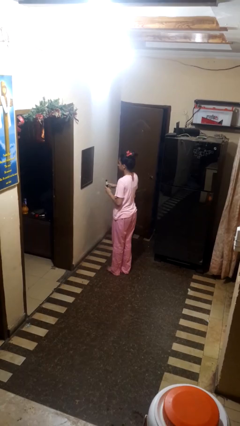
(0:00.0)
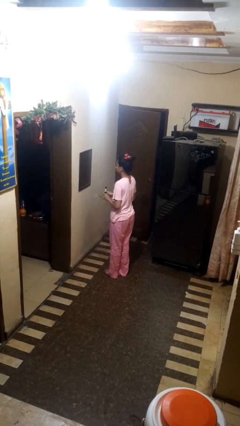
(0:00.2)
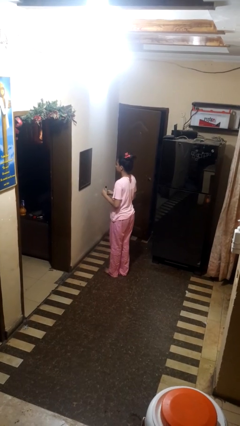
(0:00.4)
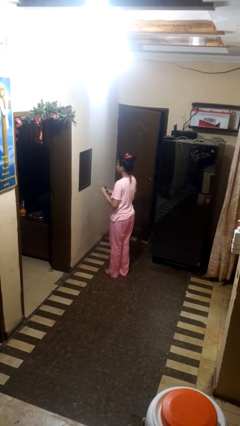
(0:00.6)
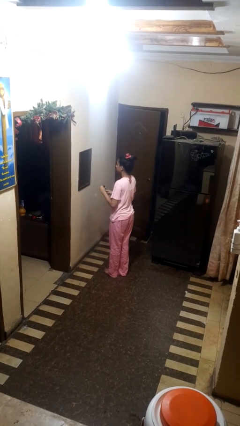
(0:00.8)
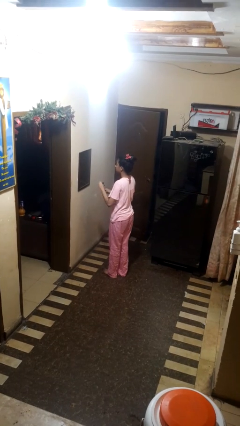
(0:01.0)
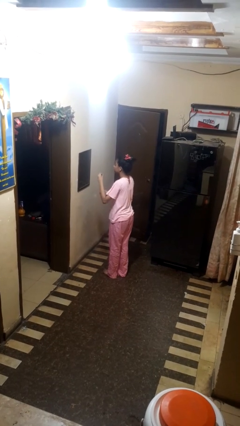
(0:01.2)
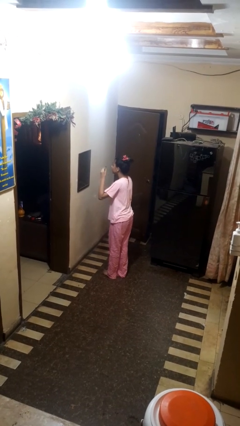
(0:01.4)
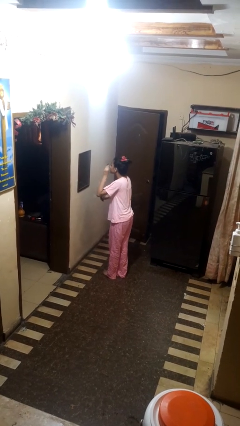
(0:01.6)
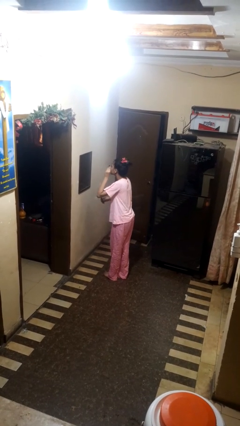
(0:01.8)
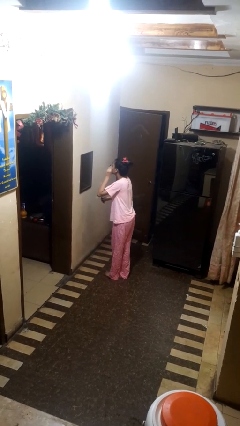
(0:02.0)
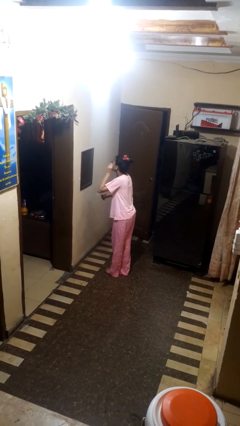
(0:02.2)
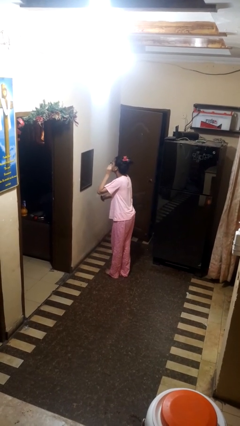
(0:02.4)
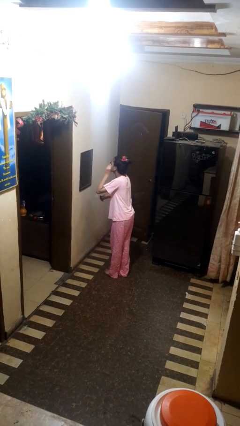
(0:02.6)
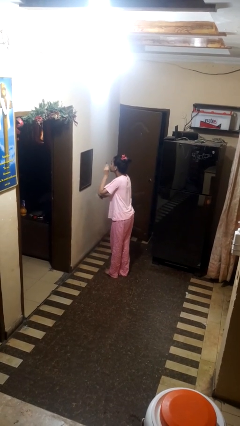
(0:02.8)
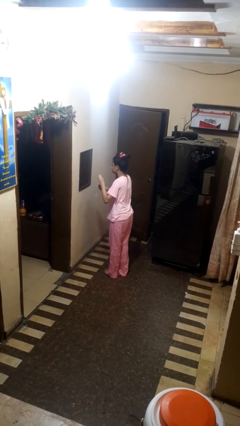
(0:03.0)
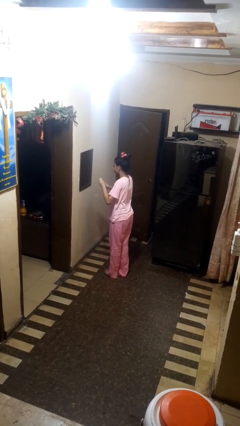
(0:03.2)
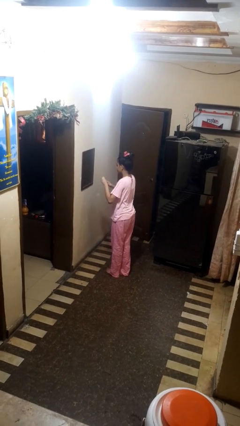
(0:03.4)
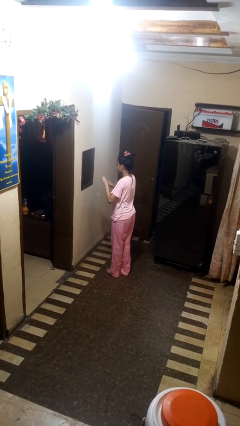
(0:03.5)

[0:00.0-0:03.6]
person applies eye makeup

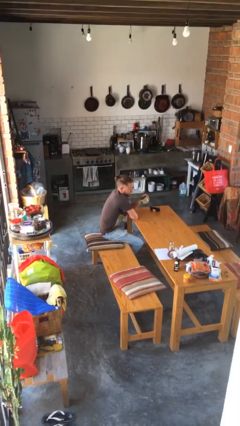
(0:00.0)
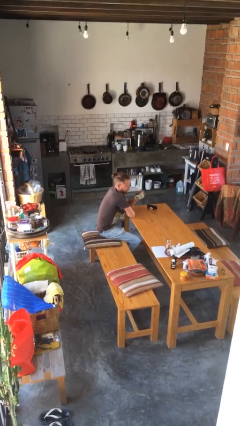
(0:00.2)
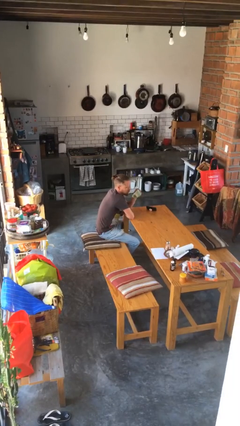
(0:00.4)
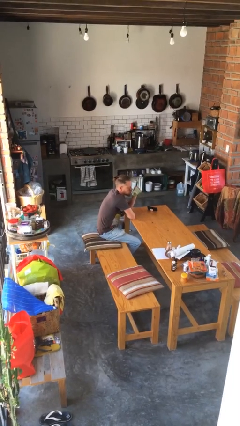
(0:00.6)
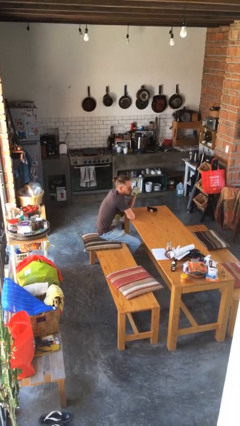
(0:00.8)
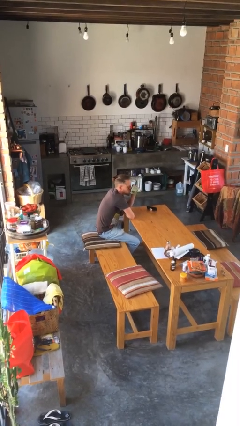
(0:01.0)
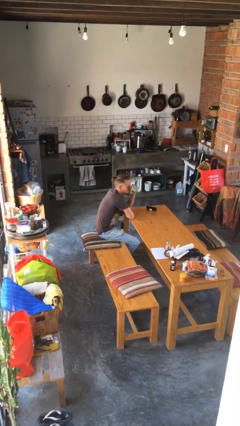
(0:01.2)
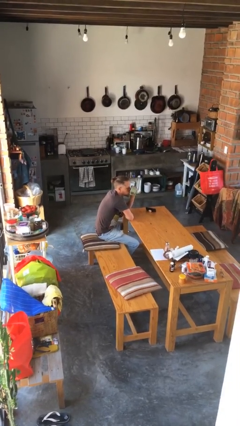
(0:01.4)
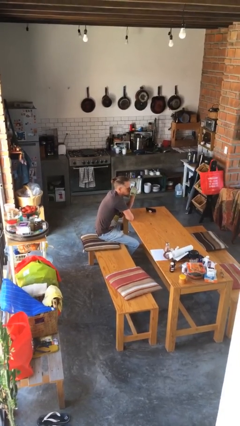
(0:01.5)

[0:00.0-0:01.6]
person drinks from mug

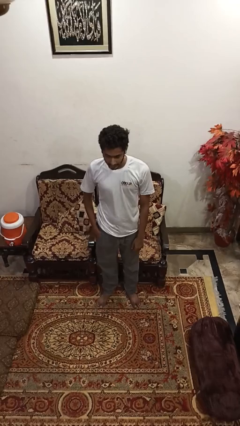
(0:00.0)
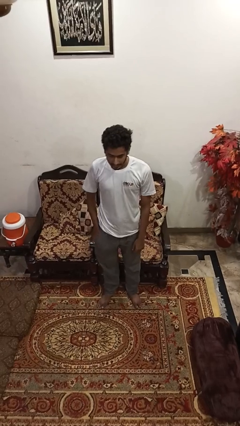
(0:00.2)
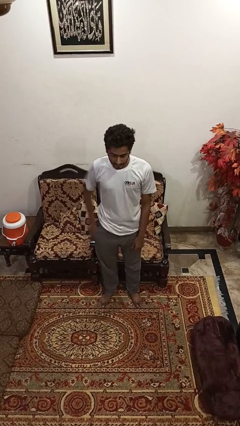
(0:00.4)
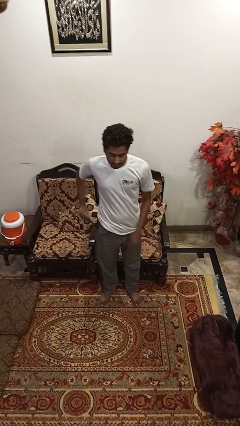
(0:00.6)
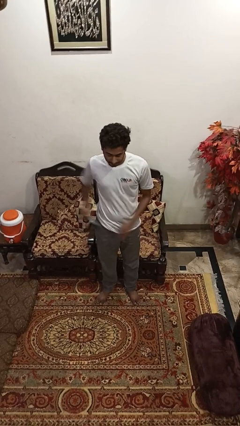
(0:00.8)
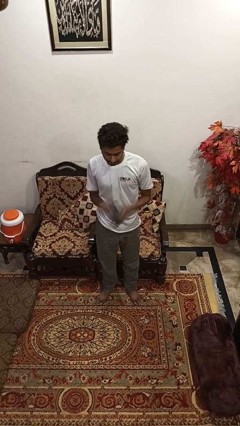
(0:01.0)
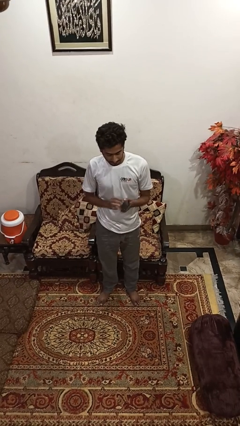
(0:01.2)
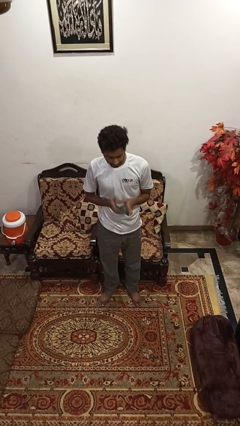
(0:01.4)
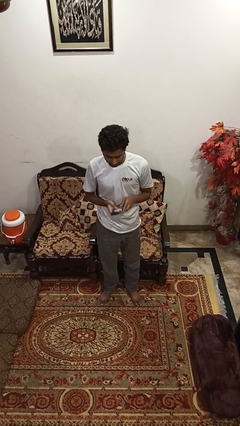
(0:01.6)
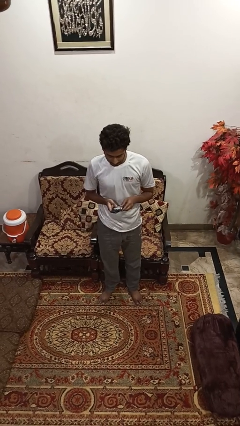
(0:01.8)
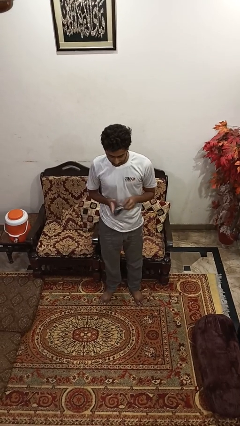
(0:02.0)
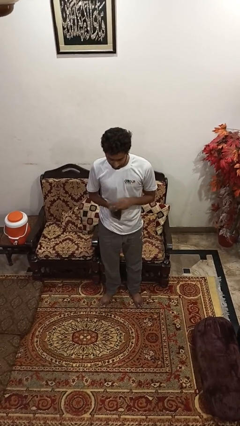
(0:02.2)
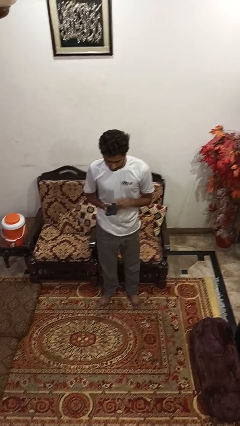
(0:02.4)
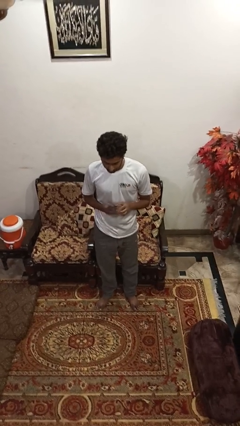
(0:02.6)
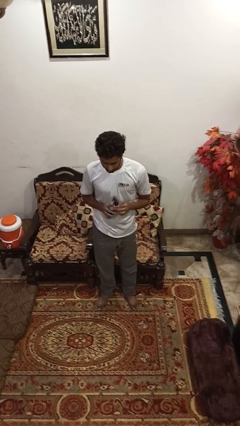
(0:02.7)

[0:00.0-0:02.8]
person takes phone from pocket

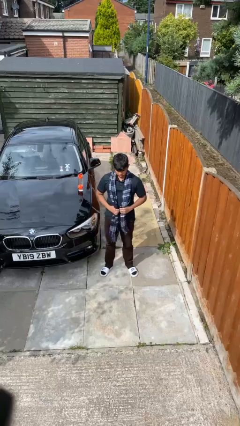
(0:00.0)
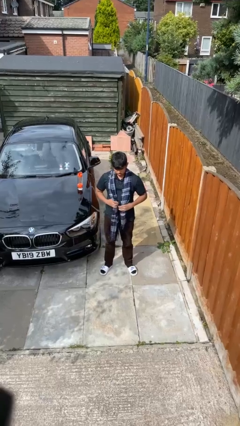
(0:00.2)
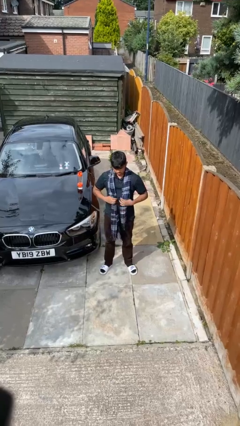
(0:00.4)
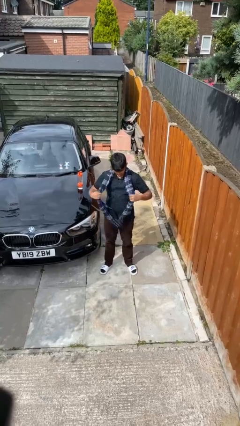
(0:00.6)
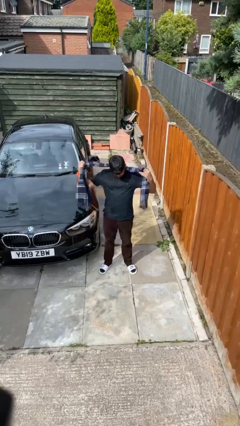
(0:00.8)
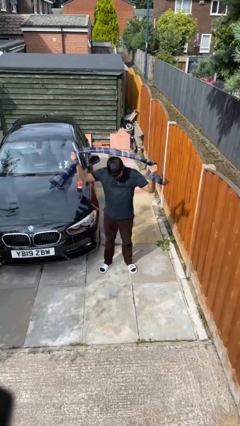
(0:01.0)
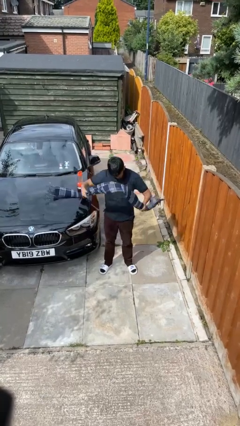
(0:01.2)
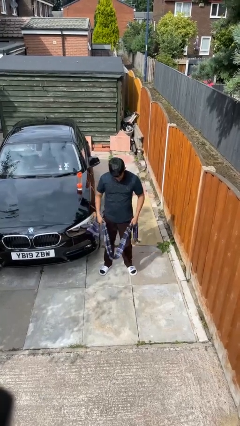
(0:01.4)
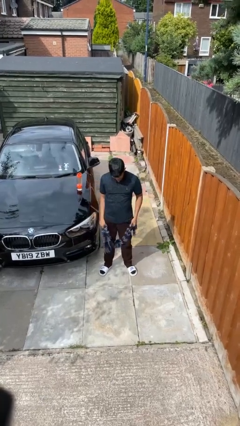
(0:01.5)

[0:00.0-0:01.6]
person takes off scarf

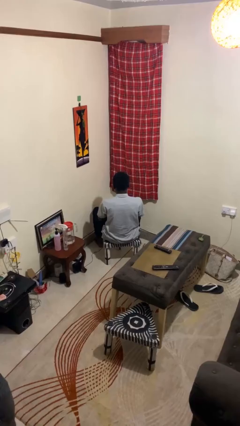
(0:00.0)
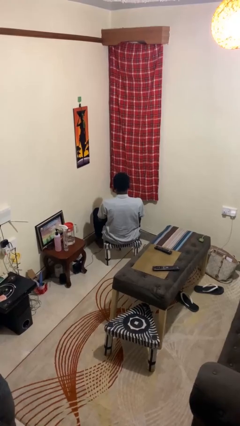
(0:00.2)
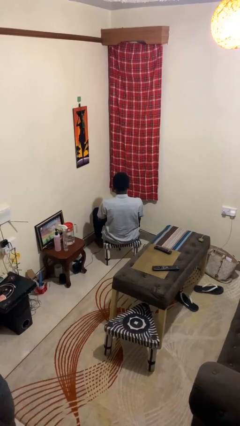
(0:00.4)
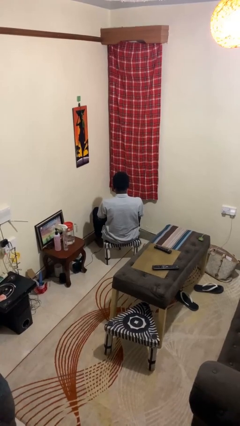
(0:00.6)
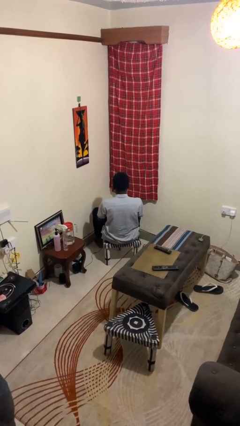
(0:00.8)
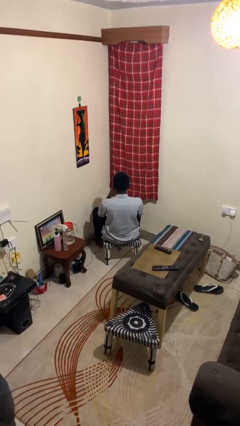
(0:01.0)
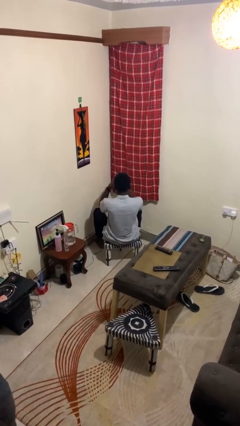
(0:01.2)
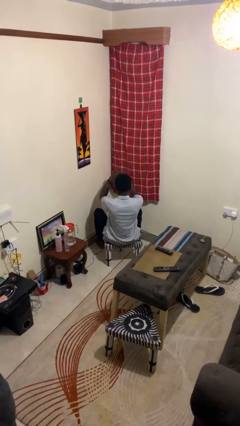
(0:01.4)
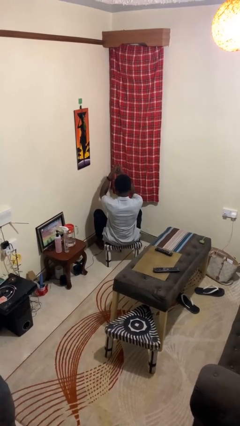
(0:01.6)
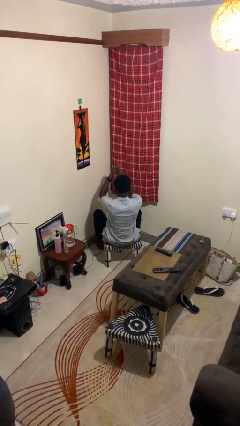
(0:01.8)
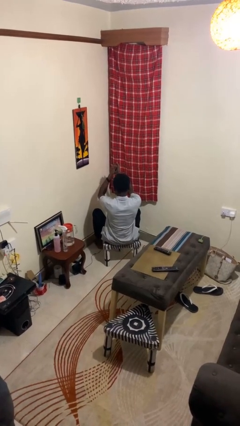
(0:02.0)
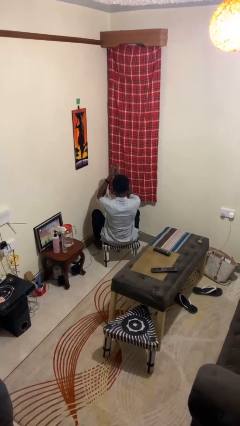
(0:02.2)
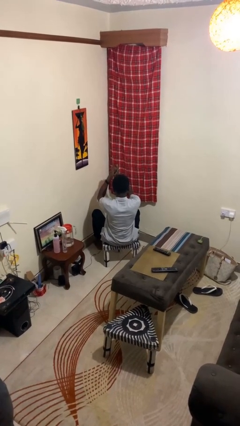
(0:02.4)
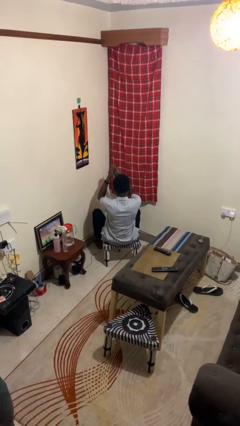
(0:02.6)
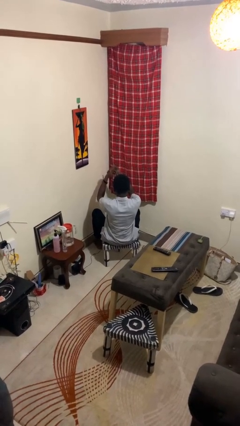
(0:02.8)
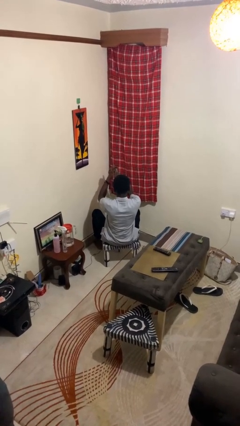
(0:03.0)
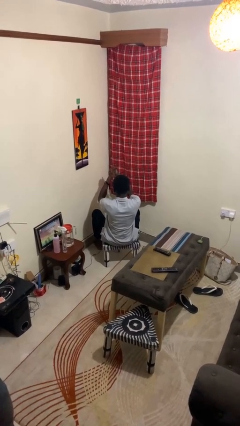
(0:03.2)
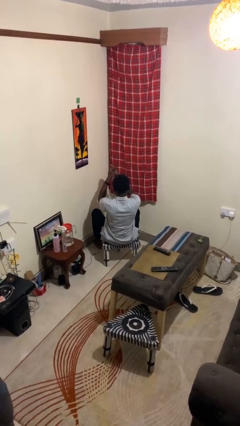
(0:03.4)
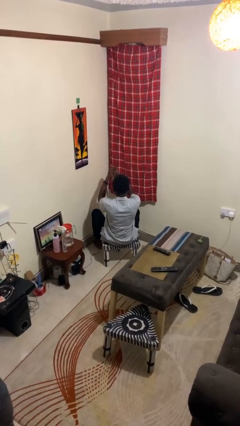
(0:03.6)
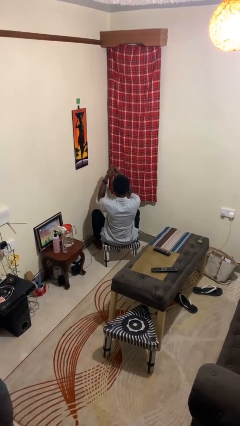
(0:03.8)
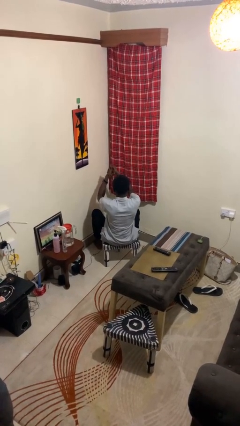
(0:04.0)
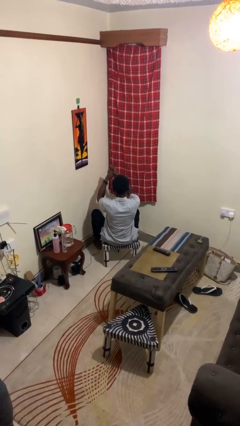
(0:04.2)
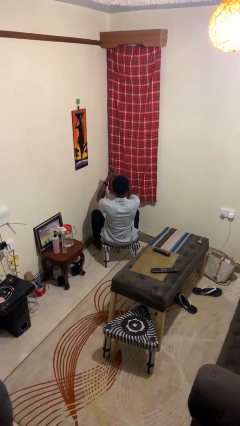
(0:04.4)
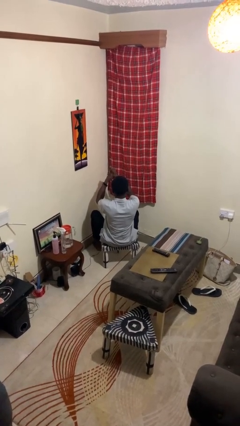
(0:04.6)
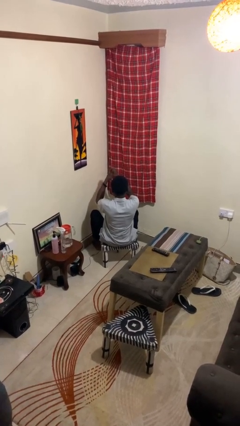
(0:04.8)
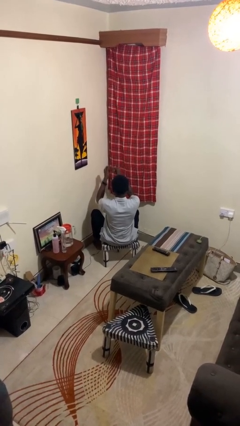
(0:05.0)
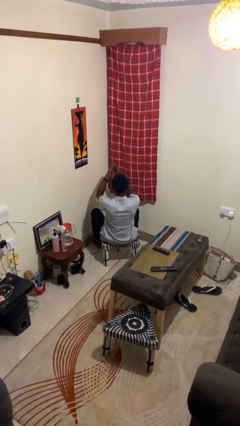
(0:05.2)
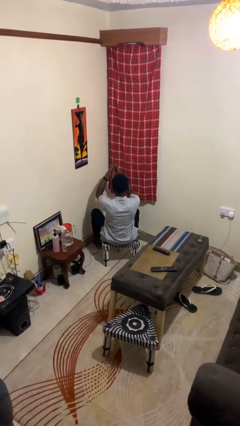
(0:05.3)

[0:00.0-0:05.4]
person cracks knuckles

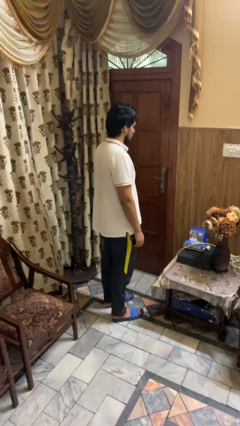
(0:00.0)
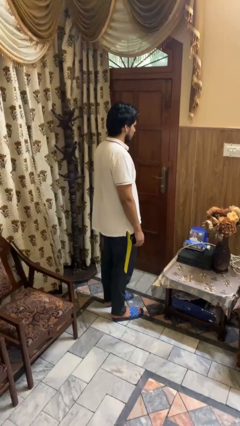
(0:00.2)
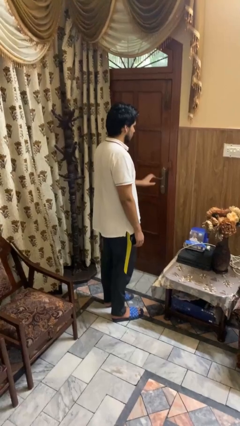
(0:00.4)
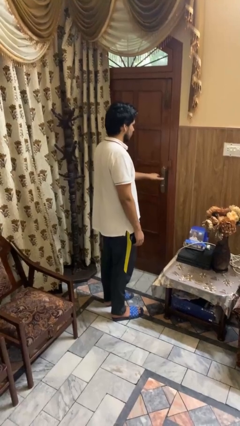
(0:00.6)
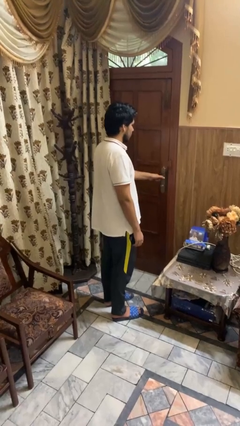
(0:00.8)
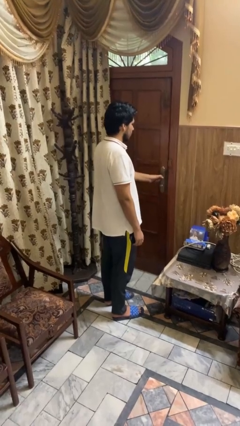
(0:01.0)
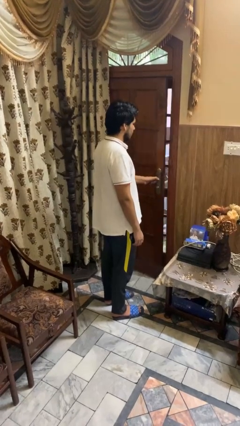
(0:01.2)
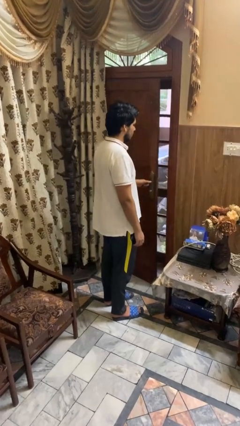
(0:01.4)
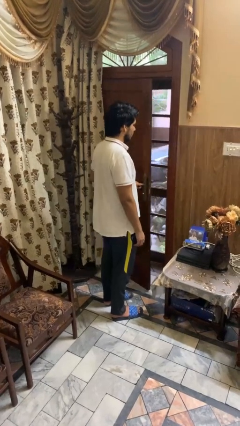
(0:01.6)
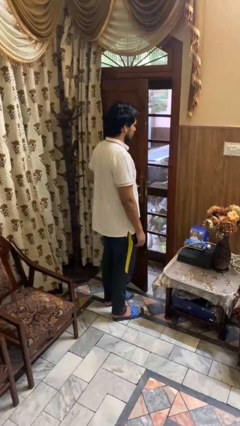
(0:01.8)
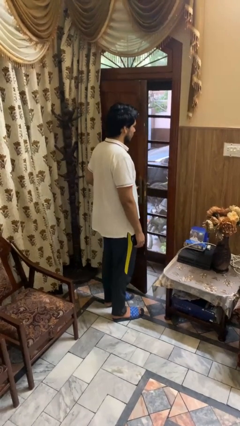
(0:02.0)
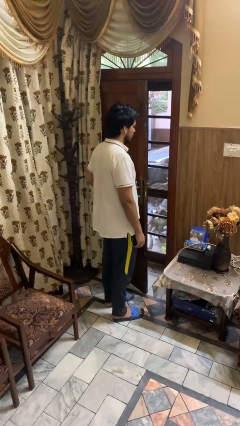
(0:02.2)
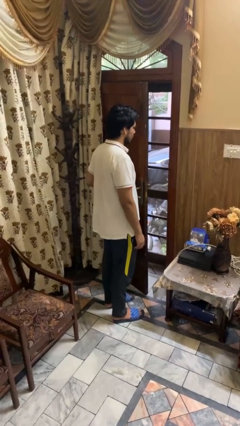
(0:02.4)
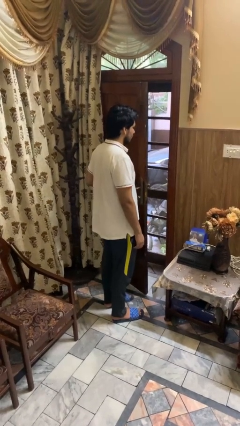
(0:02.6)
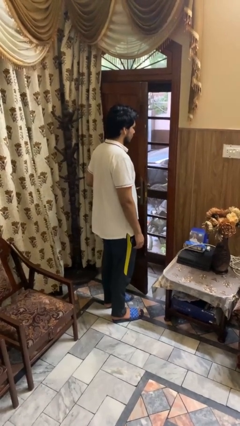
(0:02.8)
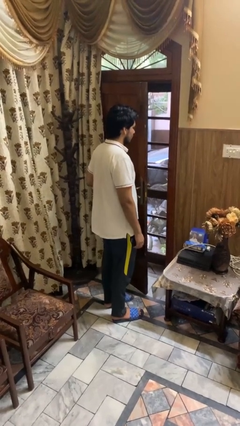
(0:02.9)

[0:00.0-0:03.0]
person opens facility door
